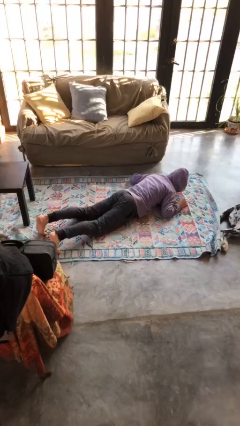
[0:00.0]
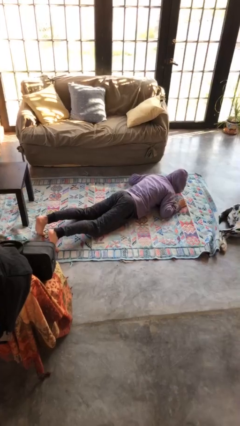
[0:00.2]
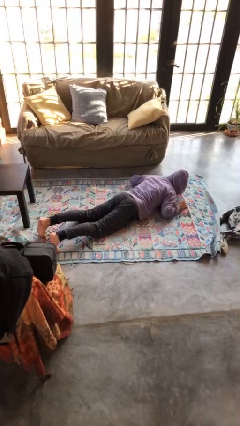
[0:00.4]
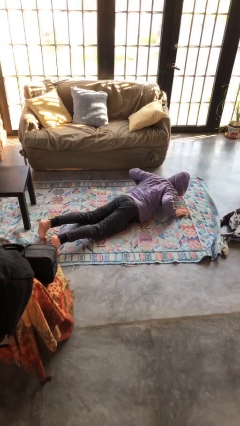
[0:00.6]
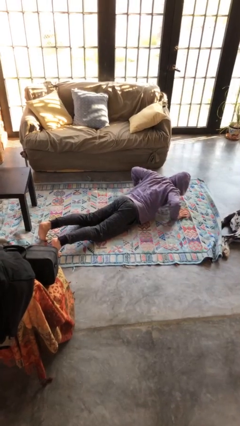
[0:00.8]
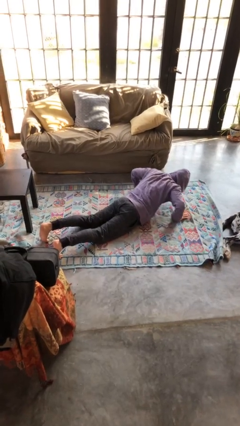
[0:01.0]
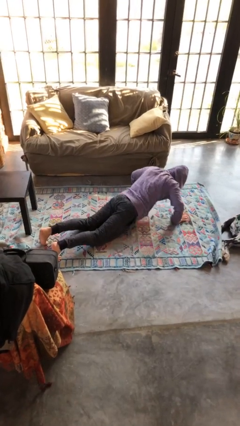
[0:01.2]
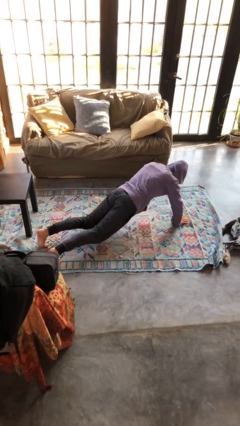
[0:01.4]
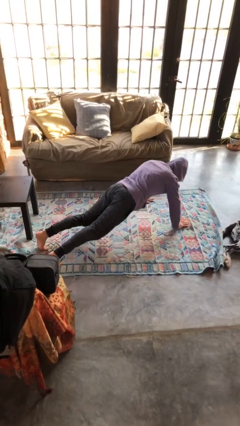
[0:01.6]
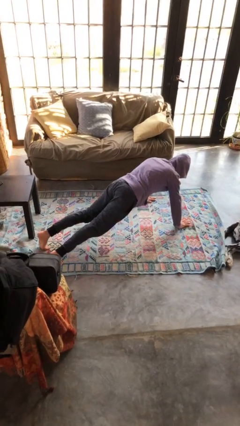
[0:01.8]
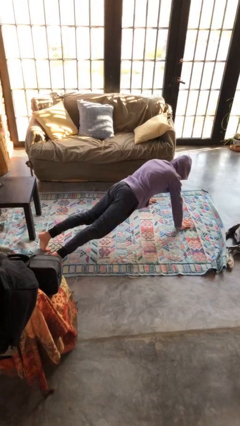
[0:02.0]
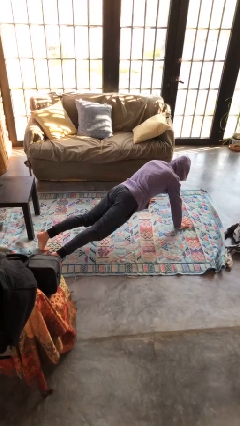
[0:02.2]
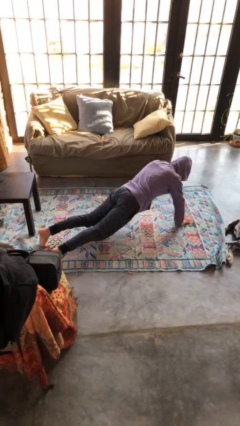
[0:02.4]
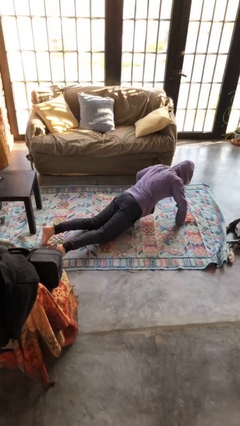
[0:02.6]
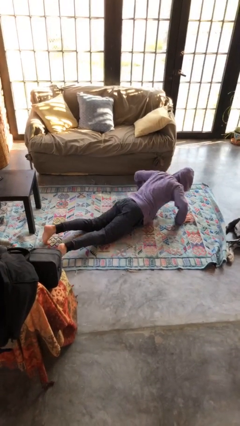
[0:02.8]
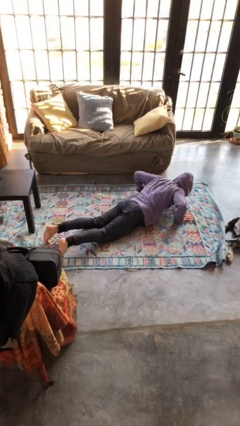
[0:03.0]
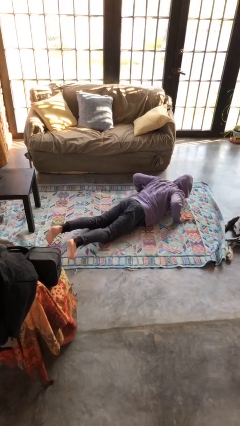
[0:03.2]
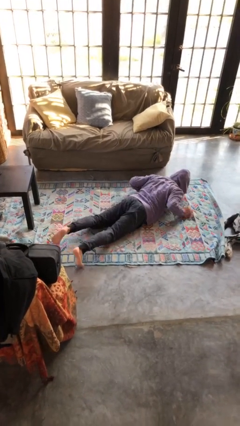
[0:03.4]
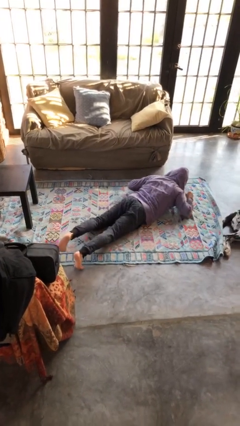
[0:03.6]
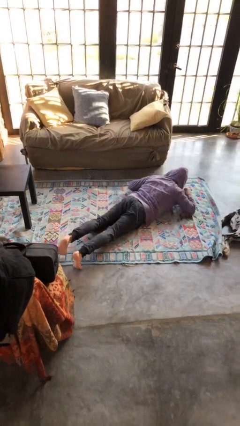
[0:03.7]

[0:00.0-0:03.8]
person exercises with pushup

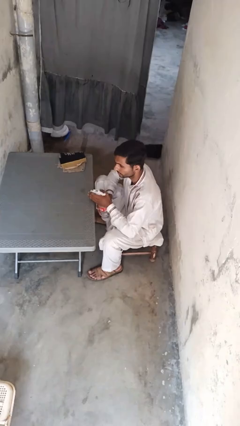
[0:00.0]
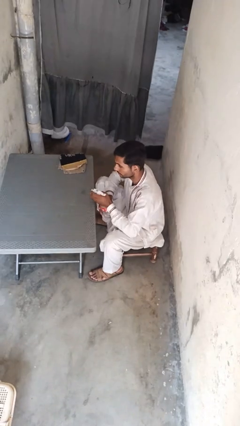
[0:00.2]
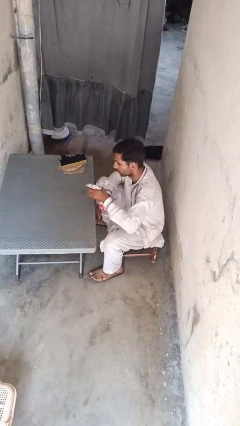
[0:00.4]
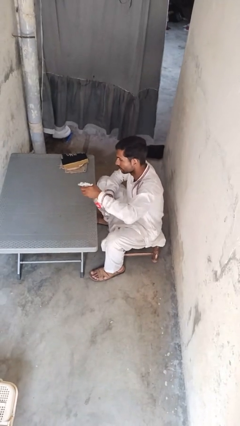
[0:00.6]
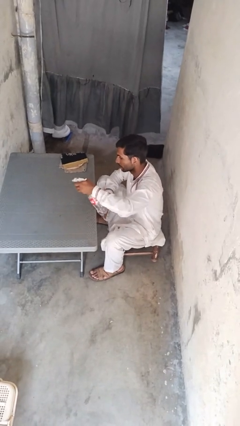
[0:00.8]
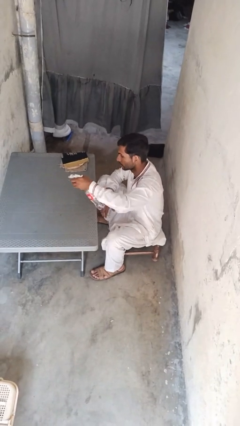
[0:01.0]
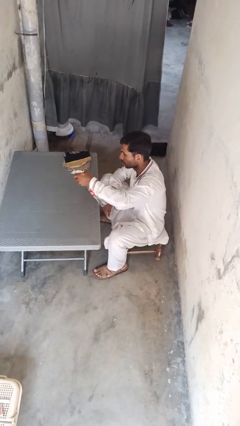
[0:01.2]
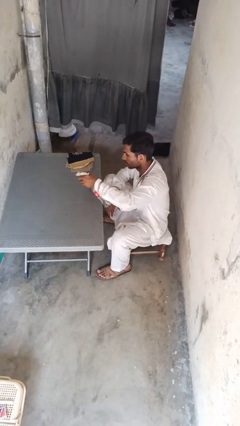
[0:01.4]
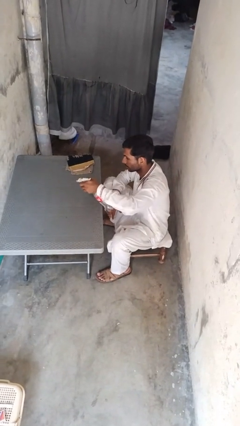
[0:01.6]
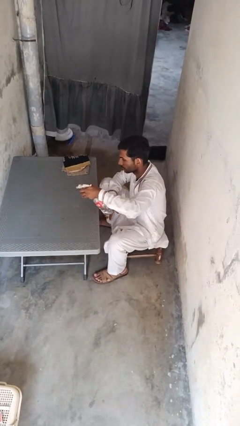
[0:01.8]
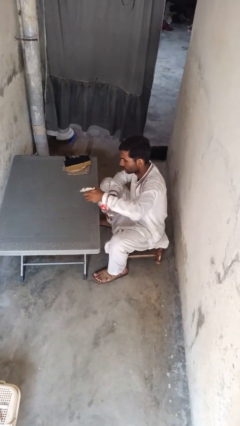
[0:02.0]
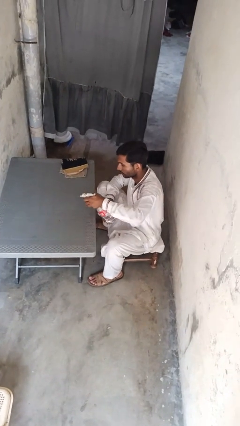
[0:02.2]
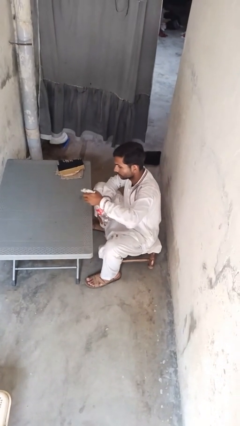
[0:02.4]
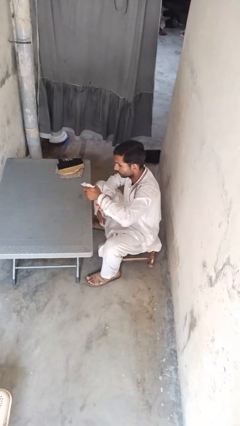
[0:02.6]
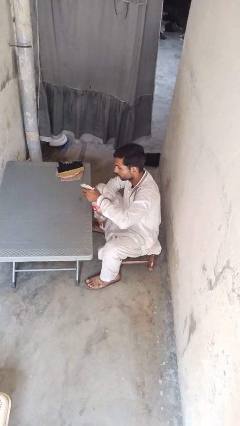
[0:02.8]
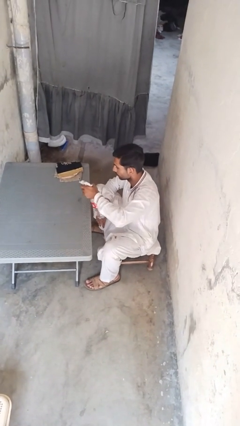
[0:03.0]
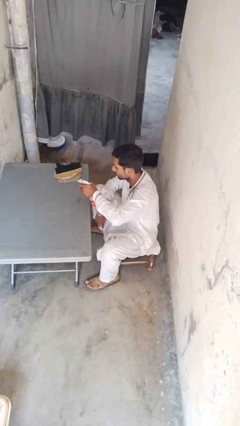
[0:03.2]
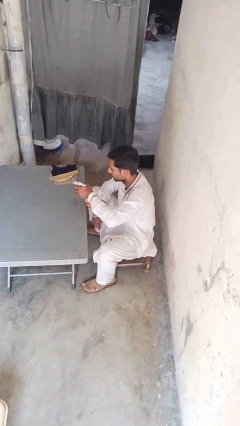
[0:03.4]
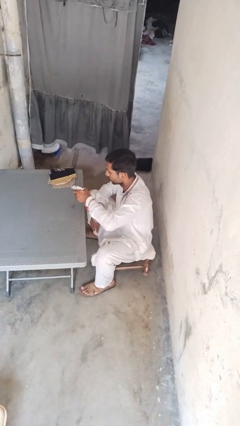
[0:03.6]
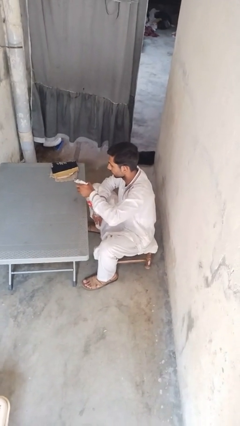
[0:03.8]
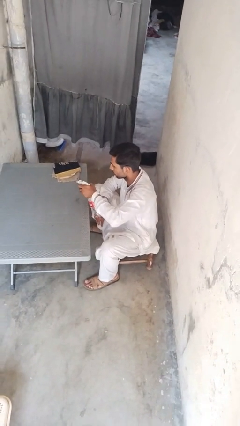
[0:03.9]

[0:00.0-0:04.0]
person sprays from bottle

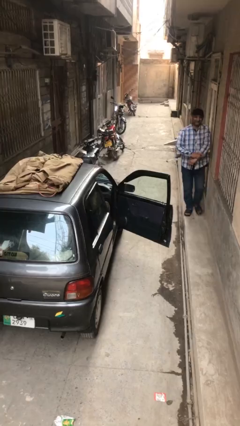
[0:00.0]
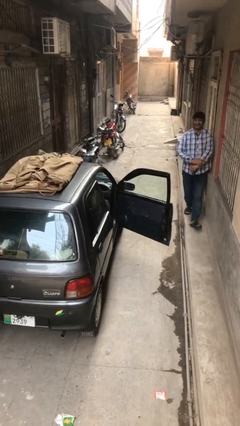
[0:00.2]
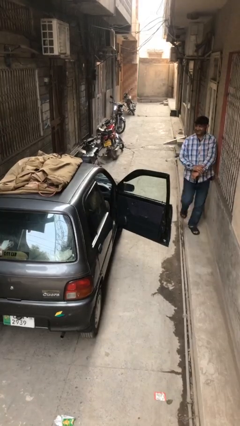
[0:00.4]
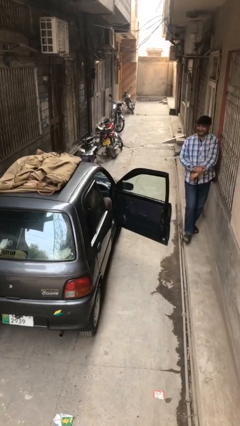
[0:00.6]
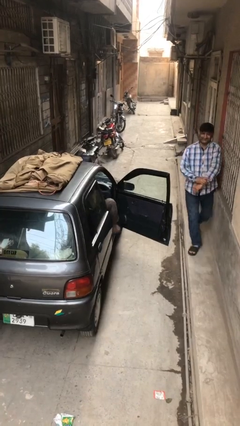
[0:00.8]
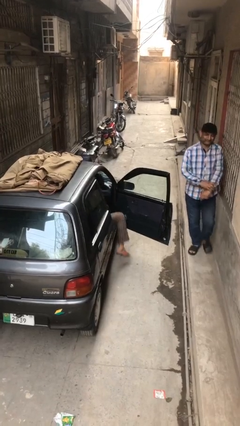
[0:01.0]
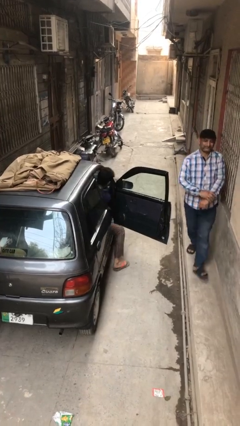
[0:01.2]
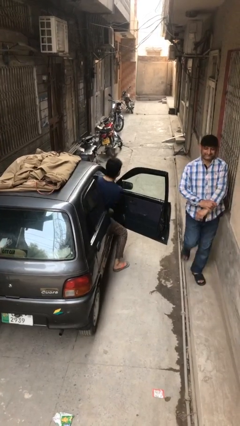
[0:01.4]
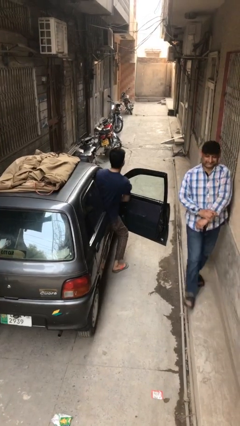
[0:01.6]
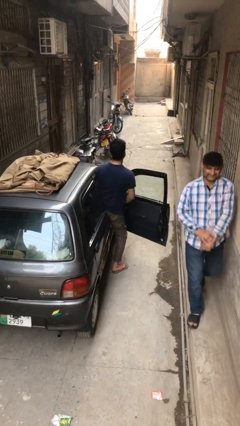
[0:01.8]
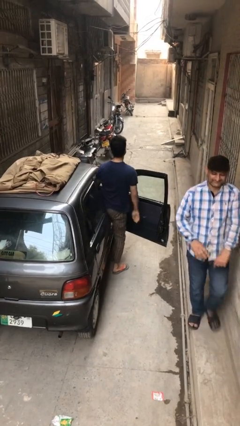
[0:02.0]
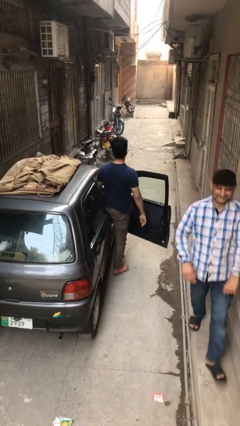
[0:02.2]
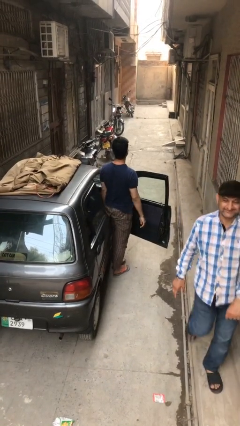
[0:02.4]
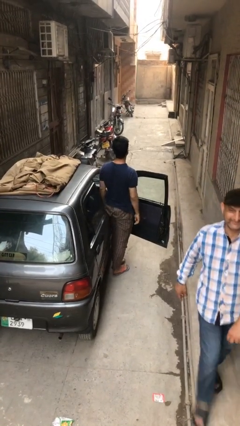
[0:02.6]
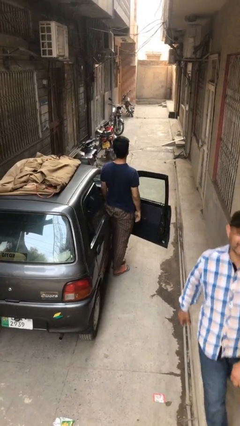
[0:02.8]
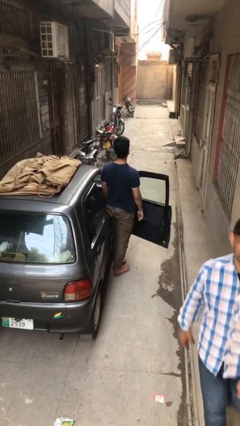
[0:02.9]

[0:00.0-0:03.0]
person exits car

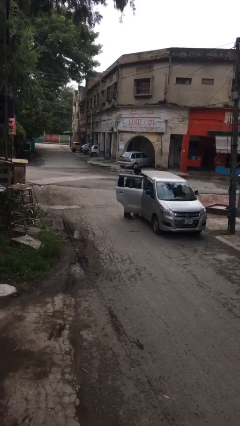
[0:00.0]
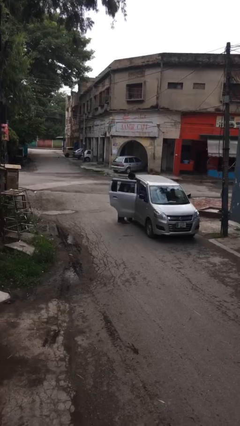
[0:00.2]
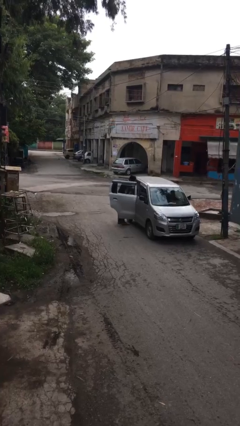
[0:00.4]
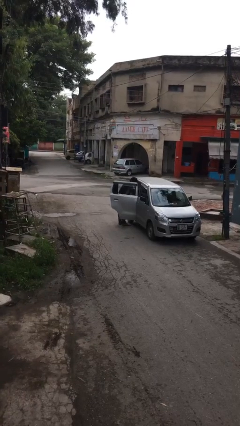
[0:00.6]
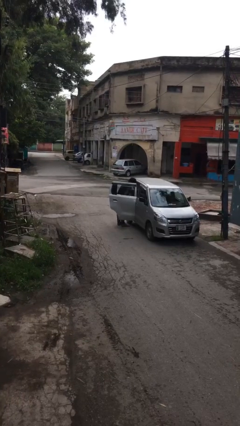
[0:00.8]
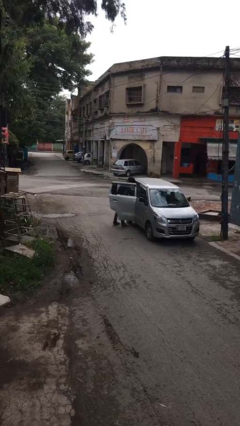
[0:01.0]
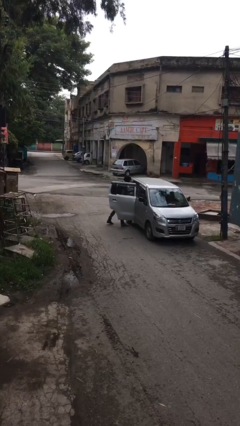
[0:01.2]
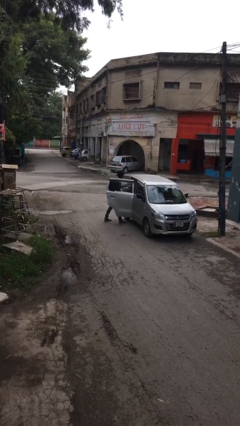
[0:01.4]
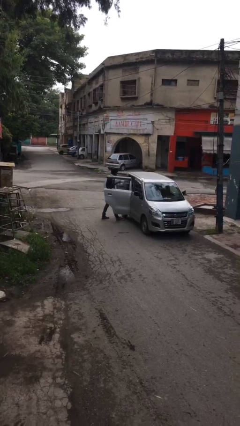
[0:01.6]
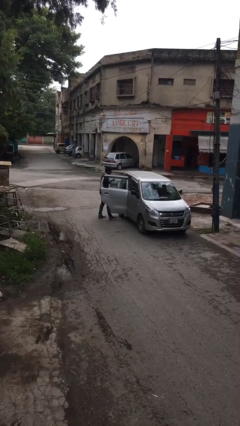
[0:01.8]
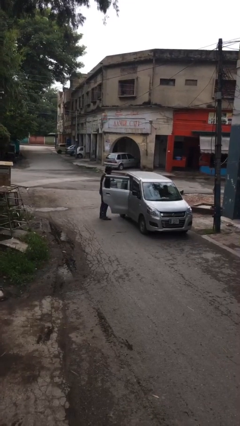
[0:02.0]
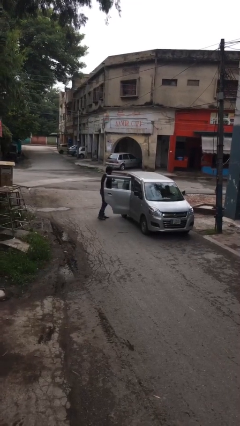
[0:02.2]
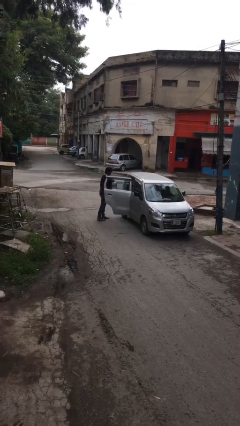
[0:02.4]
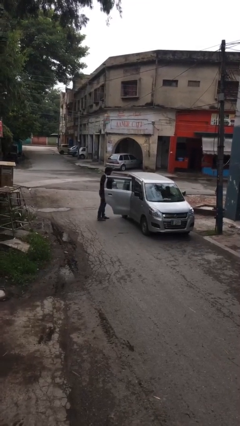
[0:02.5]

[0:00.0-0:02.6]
person unloads car

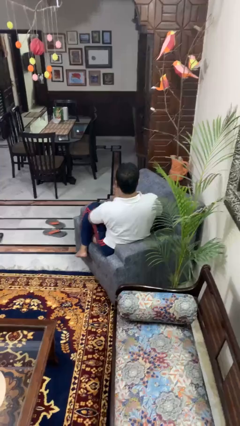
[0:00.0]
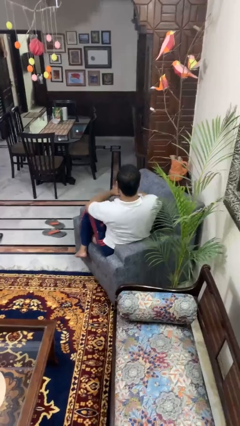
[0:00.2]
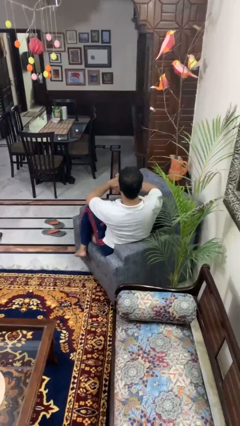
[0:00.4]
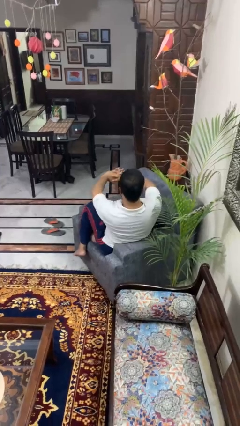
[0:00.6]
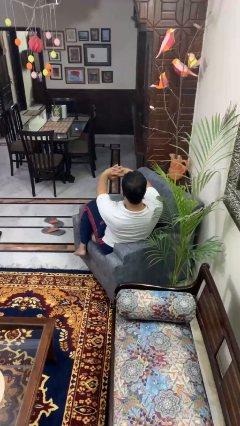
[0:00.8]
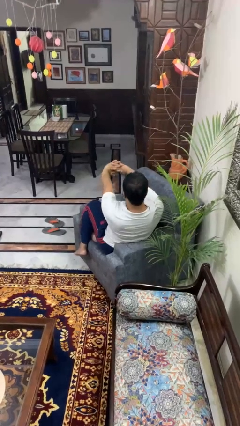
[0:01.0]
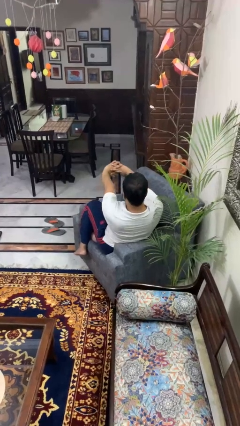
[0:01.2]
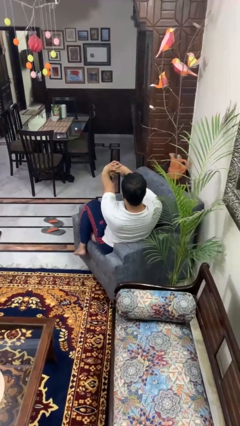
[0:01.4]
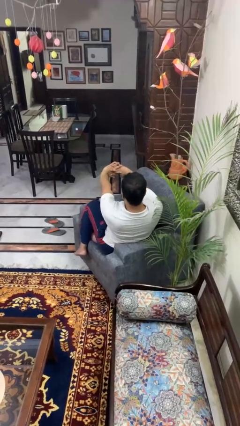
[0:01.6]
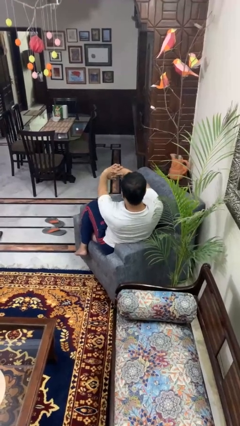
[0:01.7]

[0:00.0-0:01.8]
person cracks knuckles

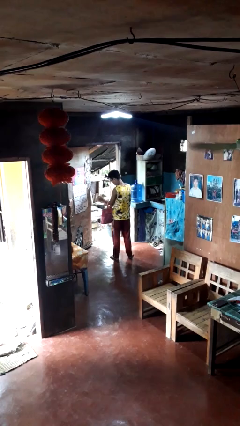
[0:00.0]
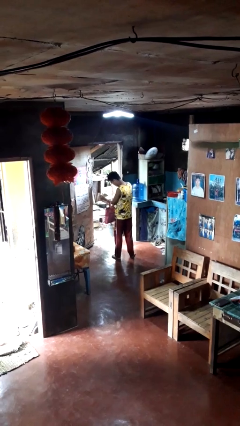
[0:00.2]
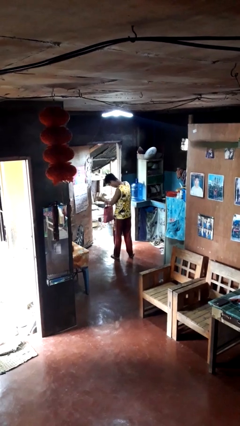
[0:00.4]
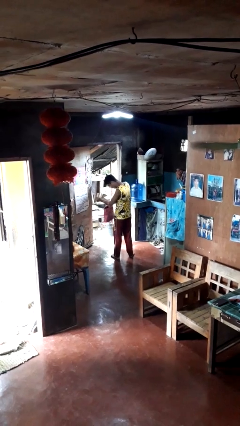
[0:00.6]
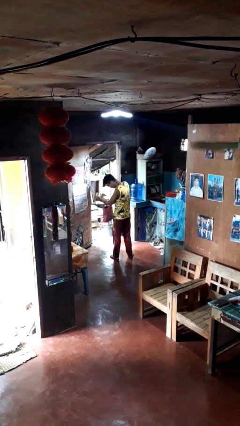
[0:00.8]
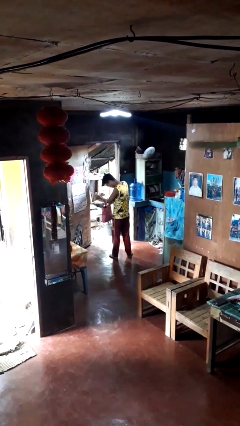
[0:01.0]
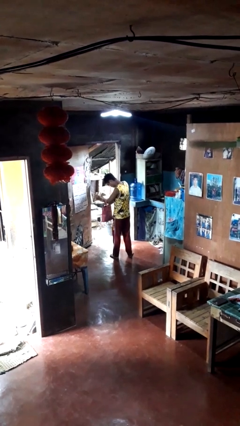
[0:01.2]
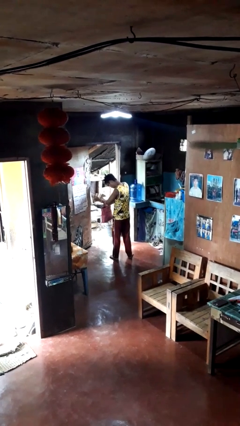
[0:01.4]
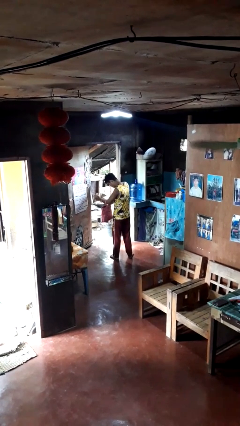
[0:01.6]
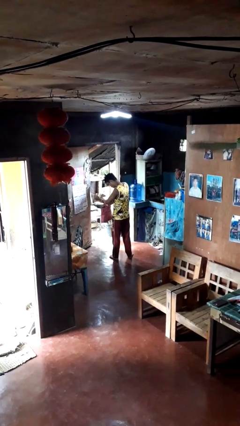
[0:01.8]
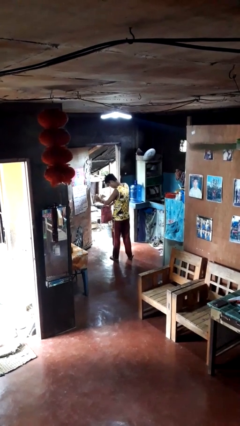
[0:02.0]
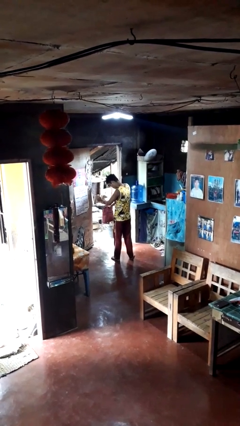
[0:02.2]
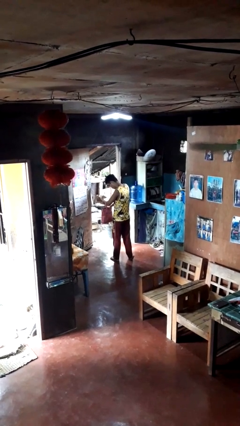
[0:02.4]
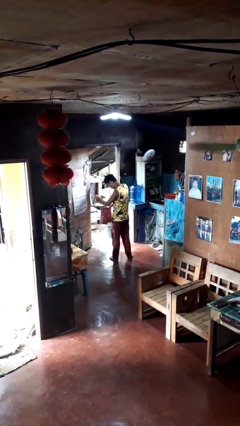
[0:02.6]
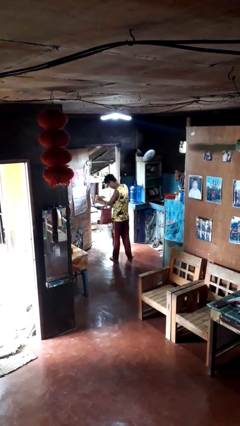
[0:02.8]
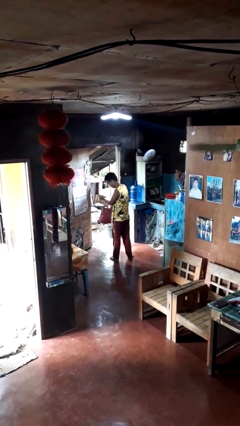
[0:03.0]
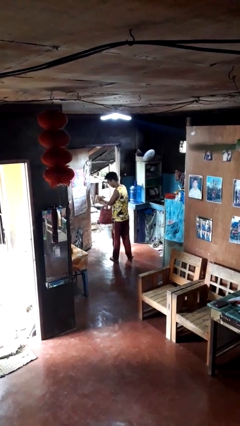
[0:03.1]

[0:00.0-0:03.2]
person searches in purse
